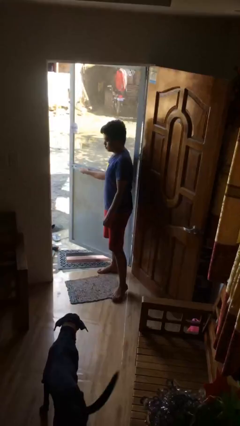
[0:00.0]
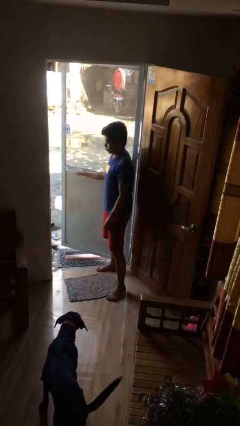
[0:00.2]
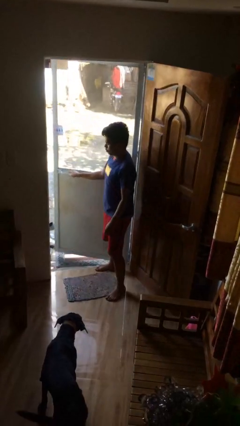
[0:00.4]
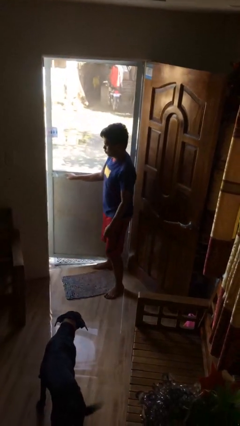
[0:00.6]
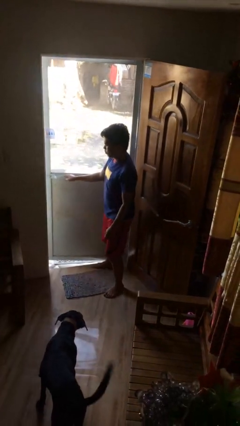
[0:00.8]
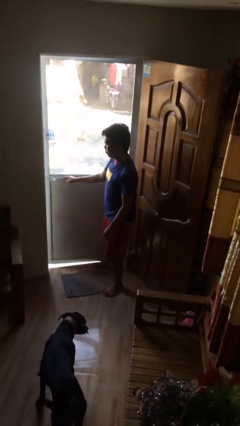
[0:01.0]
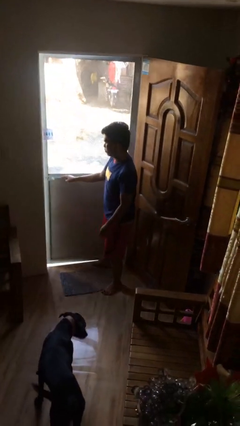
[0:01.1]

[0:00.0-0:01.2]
person closes facility door

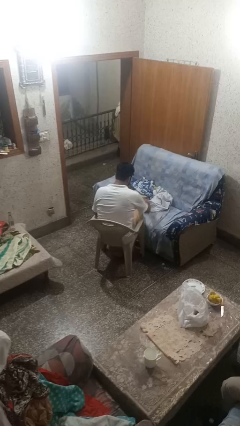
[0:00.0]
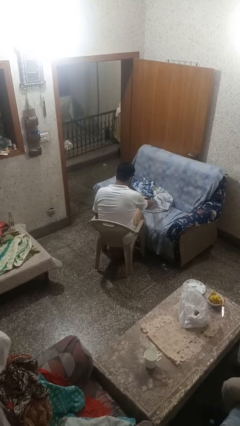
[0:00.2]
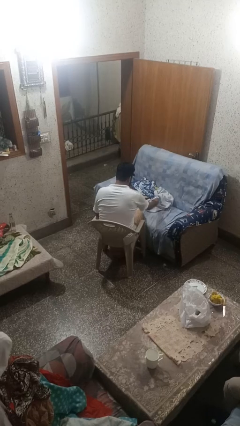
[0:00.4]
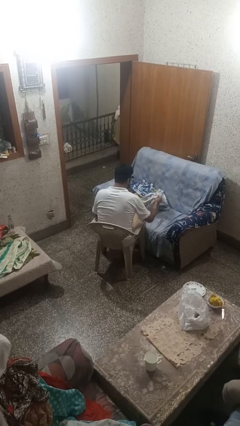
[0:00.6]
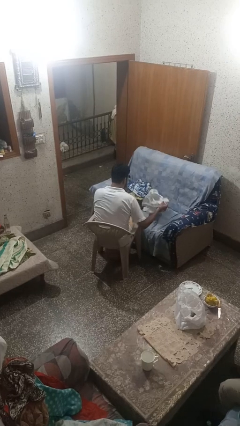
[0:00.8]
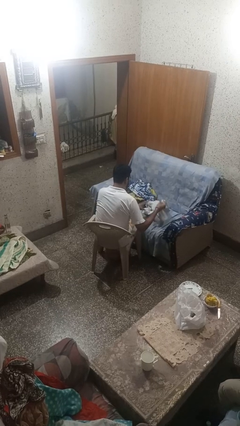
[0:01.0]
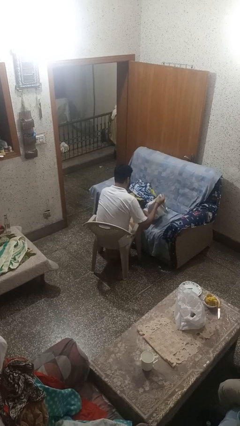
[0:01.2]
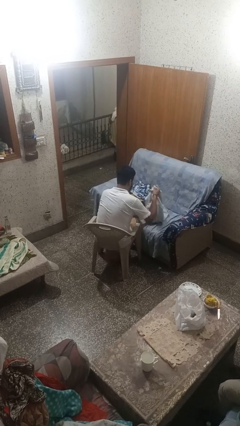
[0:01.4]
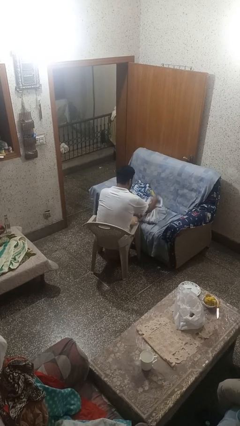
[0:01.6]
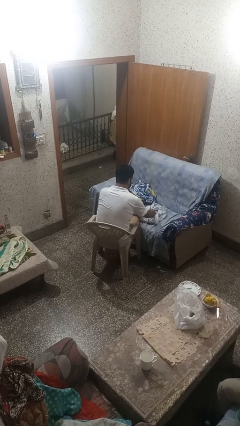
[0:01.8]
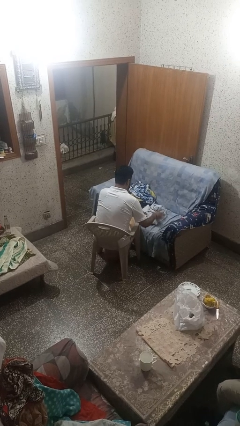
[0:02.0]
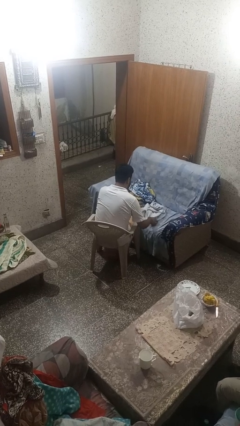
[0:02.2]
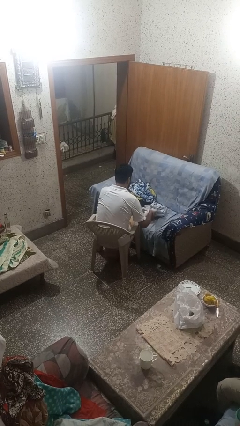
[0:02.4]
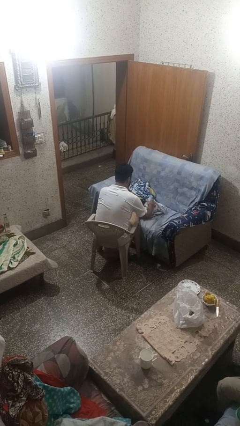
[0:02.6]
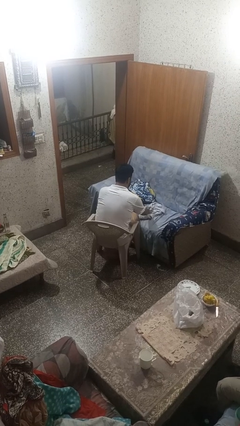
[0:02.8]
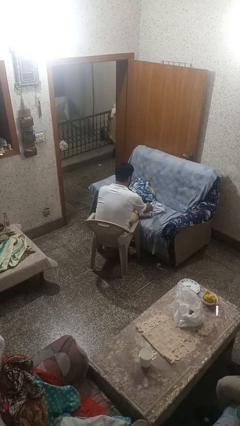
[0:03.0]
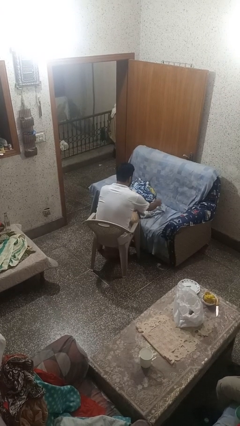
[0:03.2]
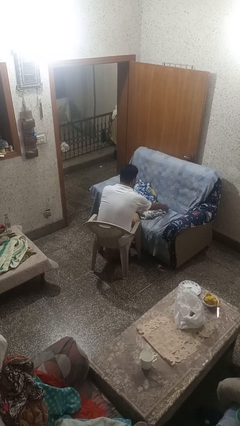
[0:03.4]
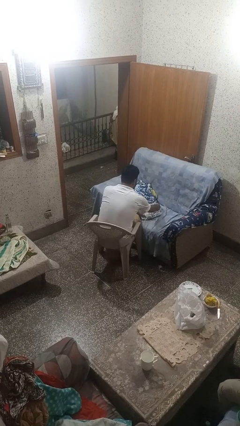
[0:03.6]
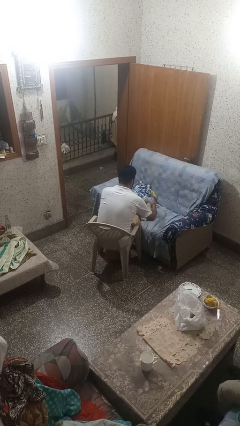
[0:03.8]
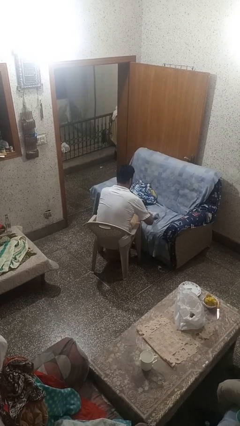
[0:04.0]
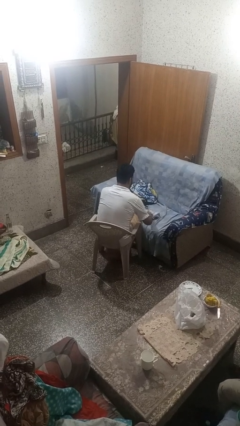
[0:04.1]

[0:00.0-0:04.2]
person folds shirt

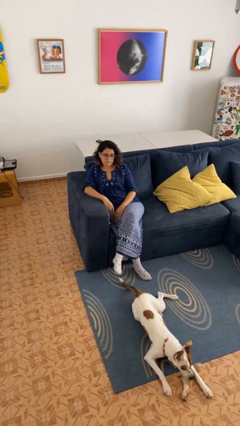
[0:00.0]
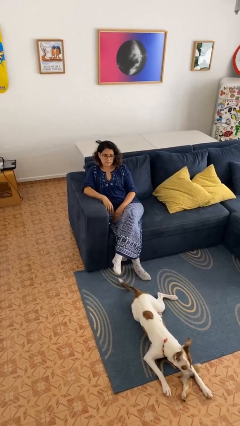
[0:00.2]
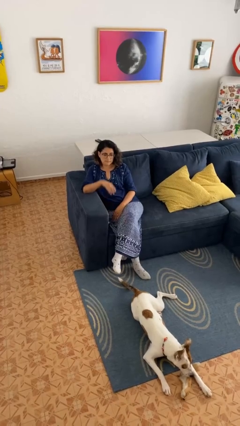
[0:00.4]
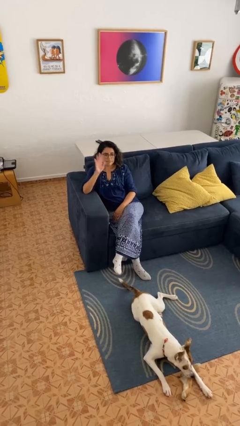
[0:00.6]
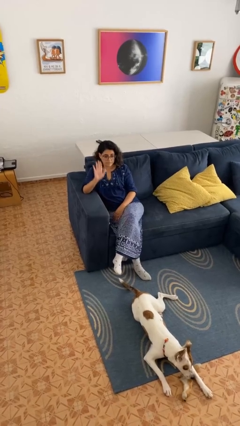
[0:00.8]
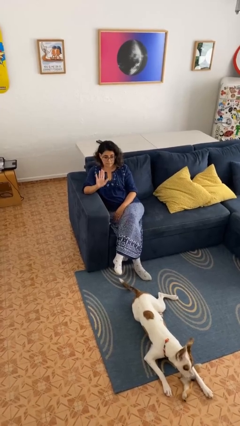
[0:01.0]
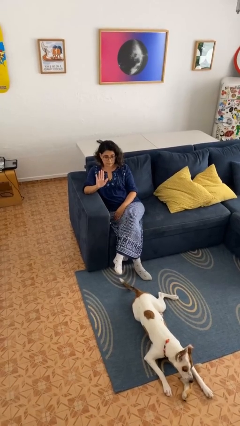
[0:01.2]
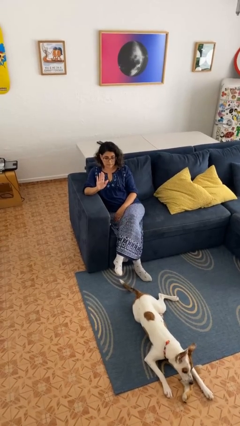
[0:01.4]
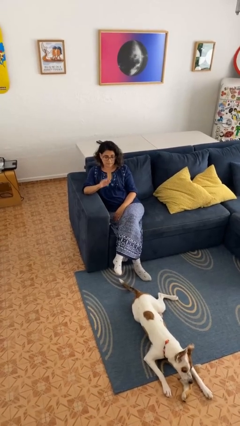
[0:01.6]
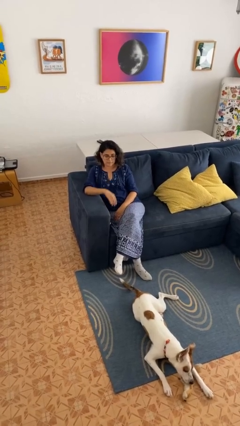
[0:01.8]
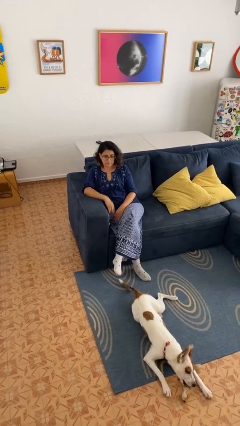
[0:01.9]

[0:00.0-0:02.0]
person gestures stop

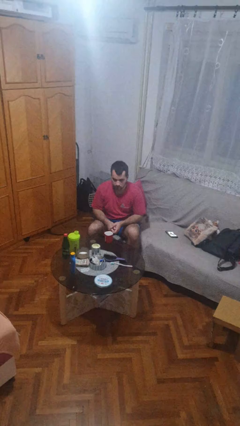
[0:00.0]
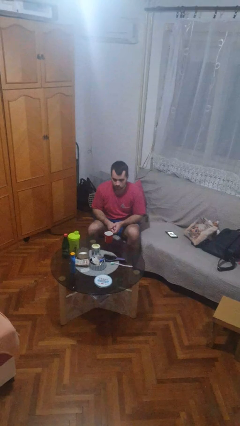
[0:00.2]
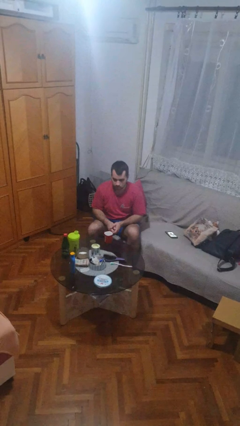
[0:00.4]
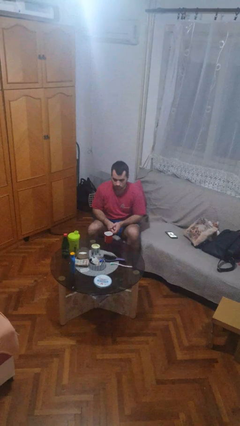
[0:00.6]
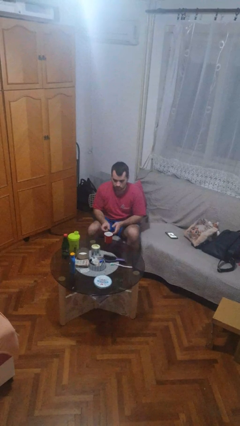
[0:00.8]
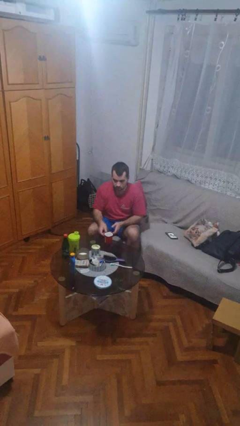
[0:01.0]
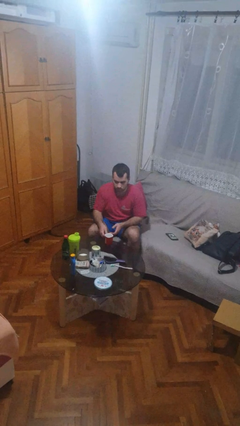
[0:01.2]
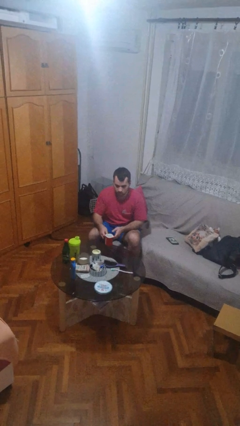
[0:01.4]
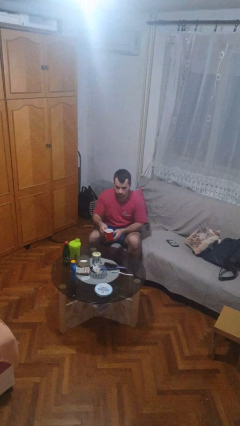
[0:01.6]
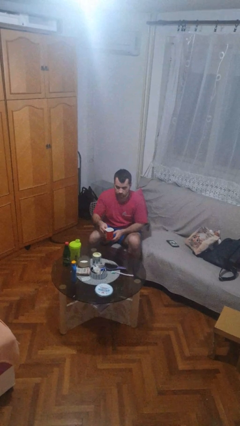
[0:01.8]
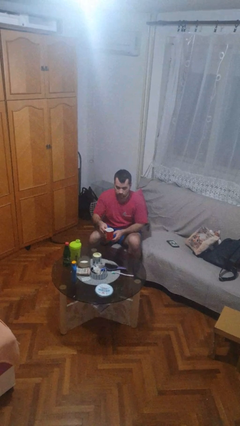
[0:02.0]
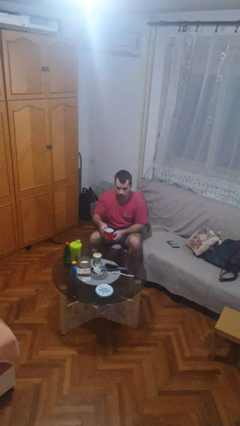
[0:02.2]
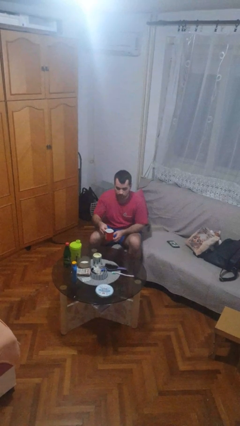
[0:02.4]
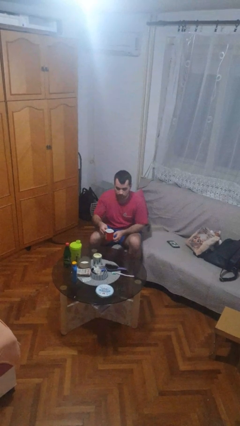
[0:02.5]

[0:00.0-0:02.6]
person picks up object from table

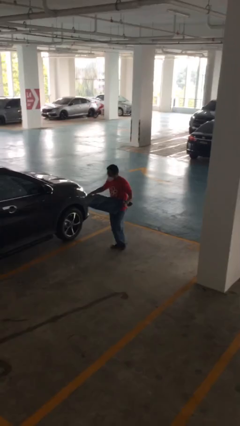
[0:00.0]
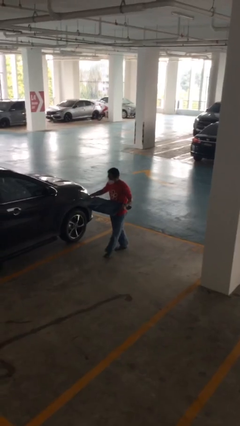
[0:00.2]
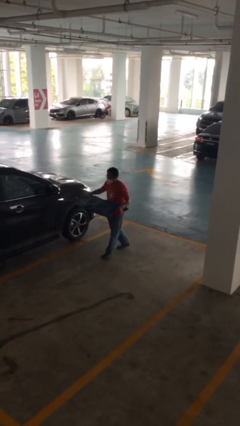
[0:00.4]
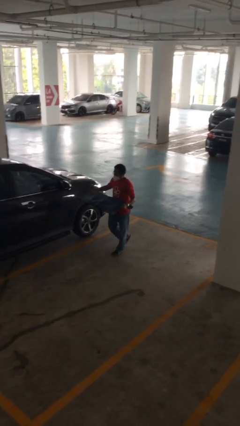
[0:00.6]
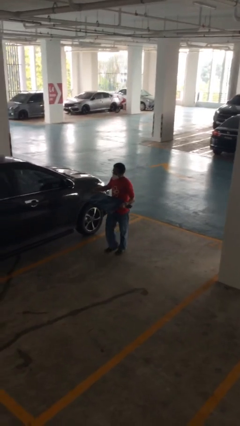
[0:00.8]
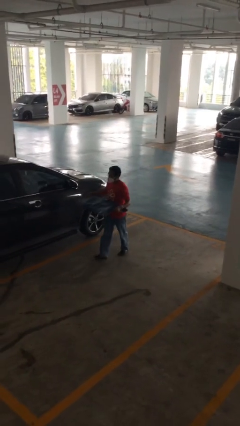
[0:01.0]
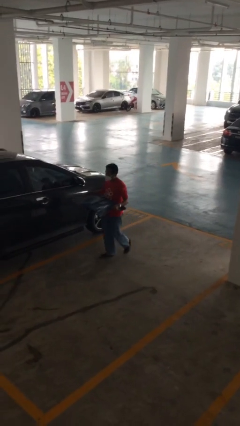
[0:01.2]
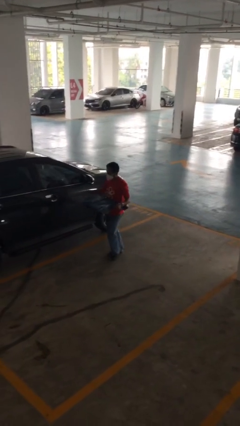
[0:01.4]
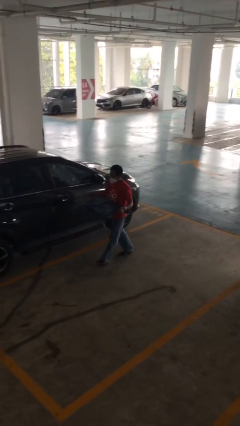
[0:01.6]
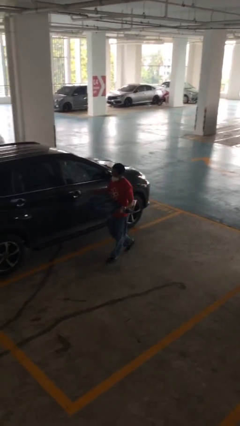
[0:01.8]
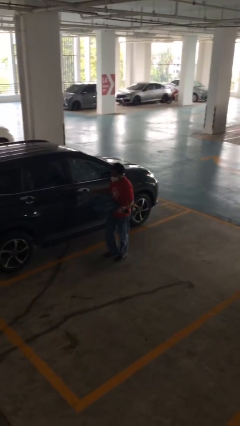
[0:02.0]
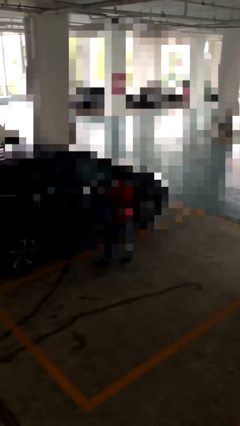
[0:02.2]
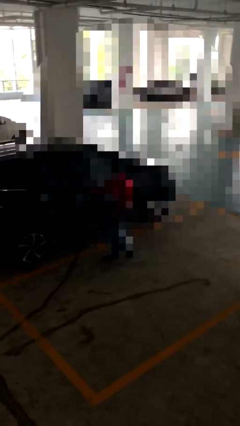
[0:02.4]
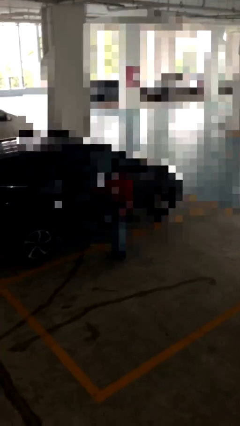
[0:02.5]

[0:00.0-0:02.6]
person carries heavy object

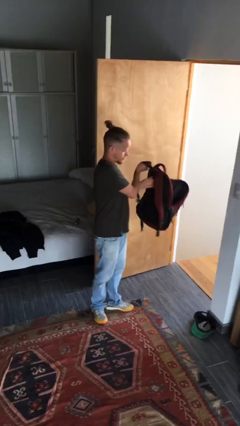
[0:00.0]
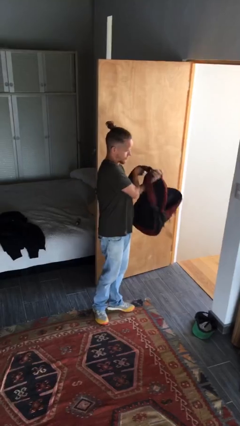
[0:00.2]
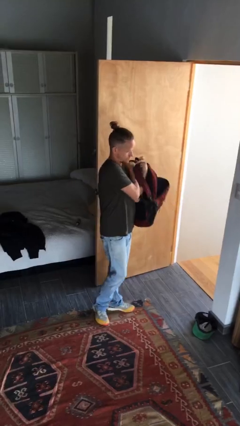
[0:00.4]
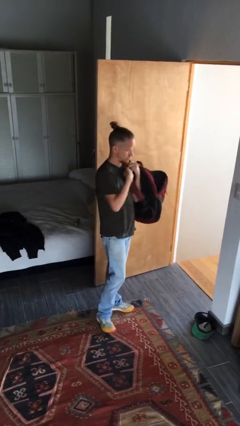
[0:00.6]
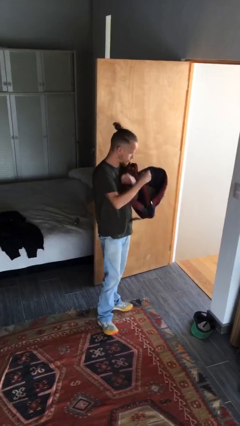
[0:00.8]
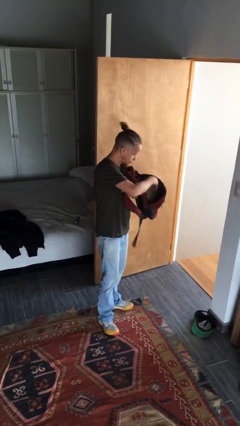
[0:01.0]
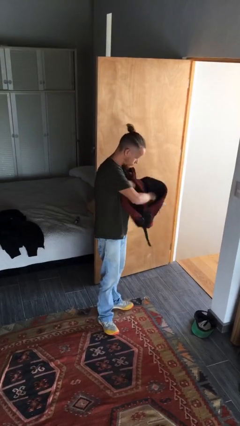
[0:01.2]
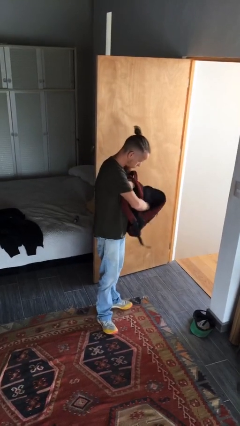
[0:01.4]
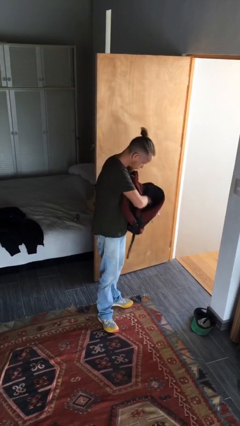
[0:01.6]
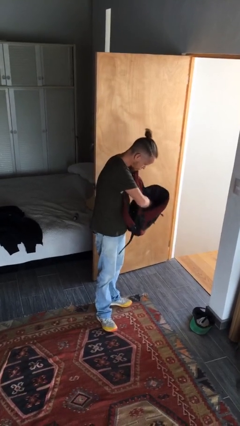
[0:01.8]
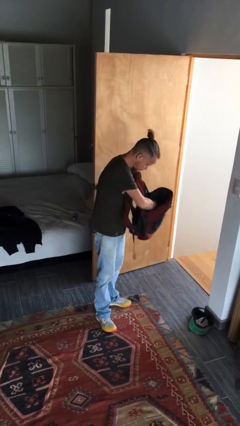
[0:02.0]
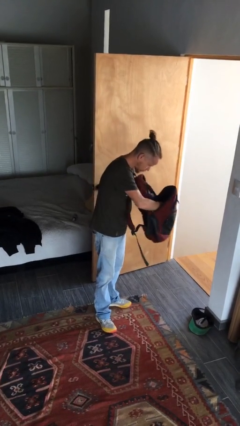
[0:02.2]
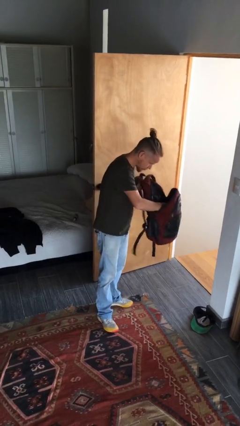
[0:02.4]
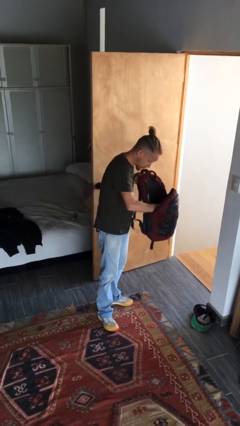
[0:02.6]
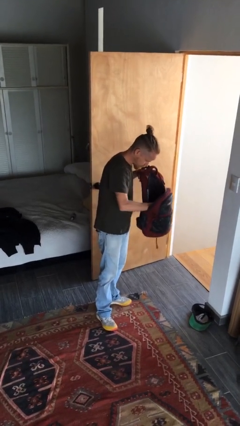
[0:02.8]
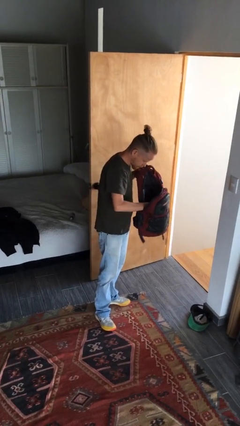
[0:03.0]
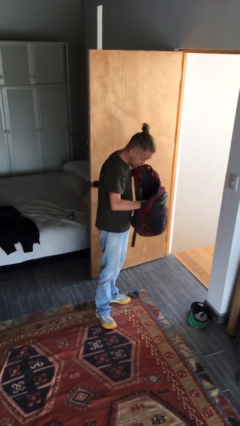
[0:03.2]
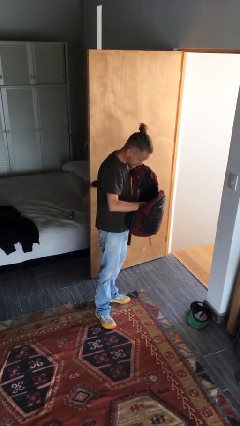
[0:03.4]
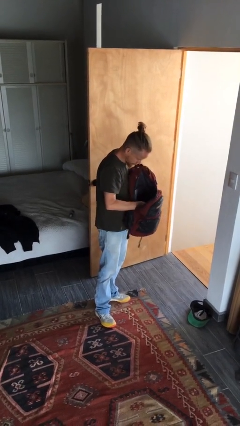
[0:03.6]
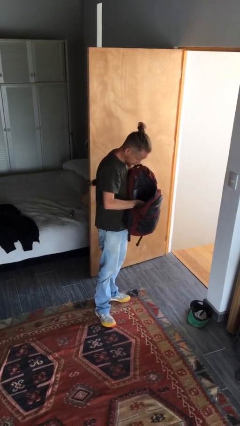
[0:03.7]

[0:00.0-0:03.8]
person searches in backpack

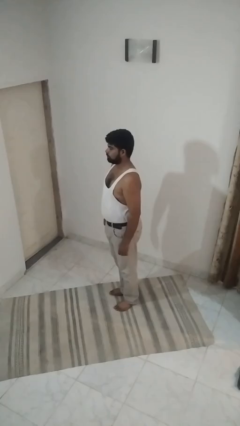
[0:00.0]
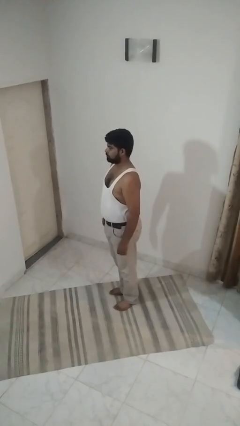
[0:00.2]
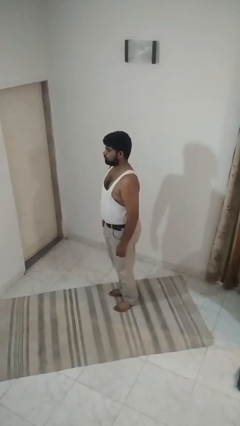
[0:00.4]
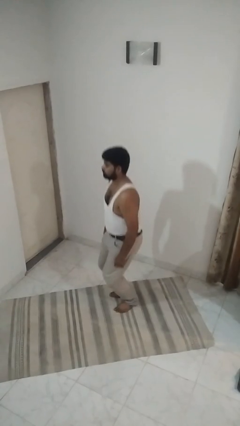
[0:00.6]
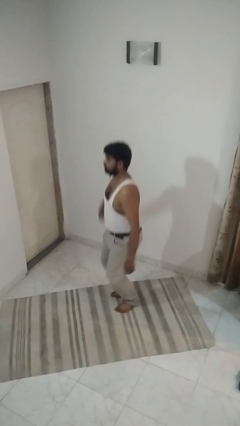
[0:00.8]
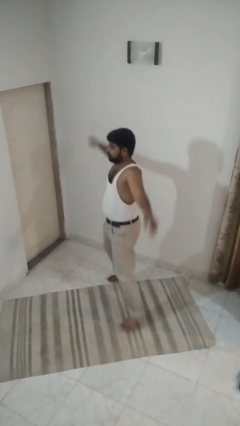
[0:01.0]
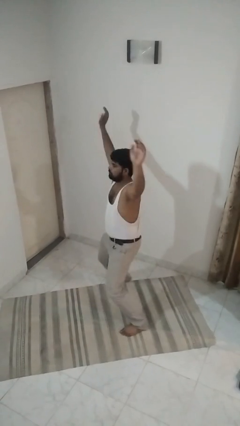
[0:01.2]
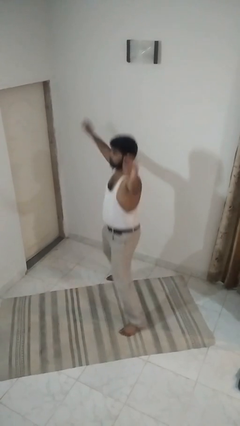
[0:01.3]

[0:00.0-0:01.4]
person exercises with jumping jacks
